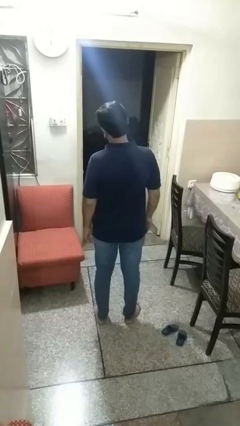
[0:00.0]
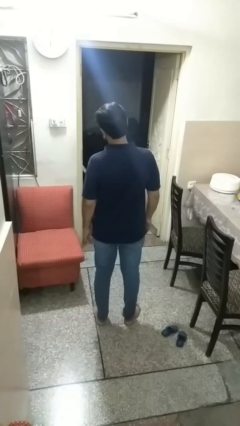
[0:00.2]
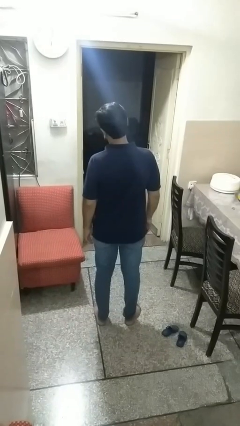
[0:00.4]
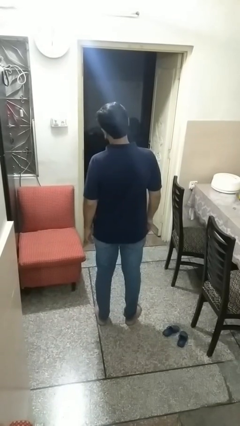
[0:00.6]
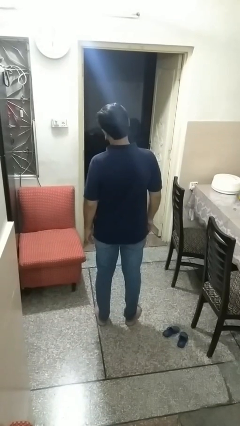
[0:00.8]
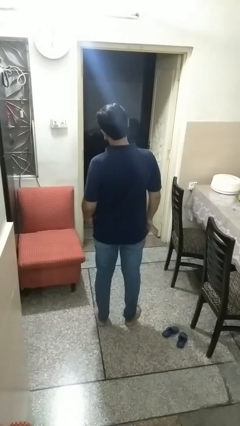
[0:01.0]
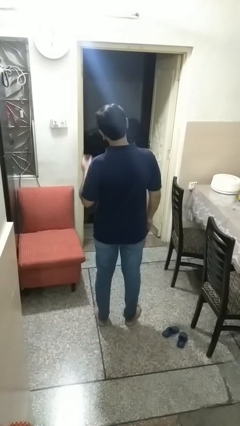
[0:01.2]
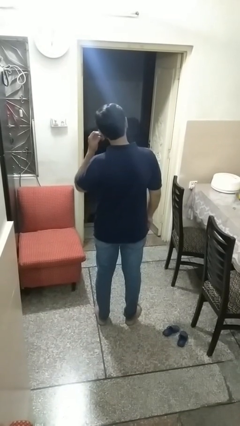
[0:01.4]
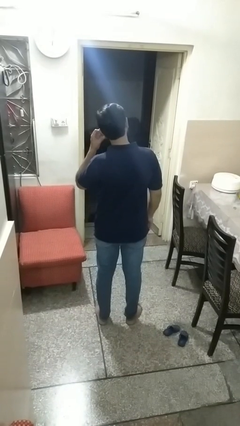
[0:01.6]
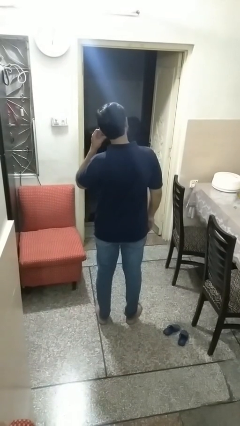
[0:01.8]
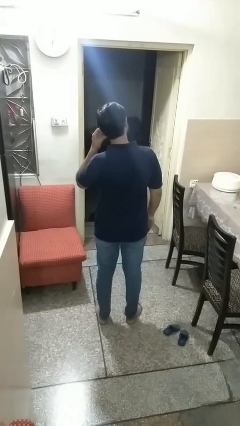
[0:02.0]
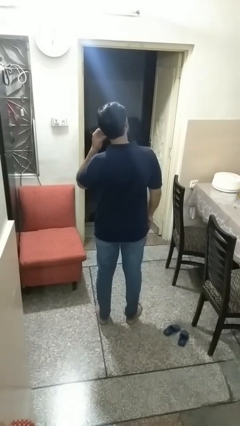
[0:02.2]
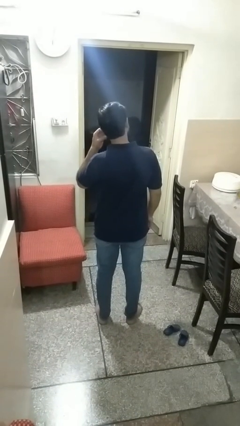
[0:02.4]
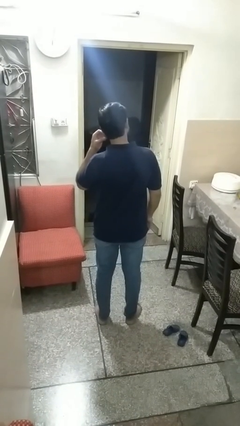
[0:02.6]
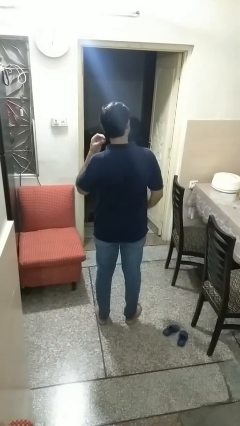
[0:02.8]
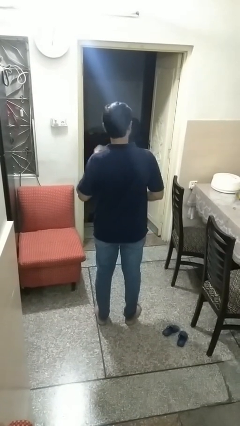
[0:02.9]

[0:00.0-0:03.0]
person takes off earrings

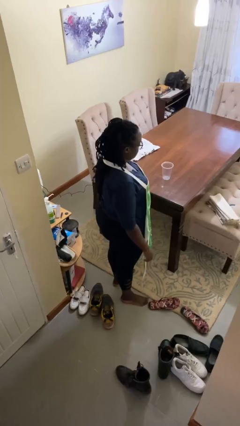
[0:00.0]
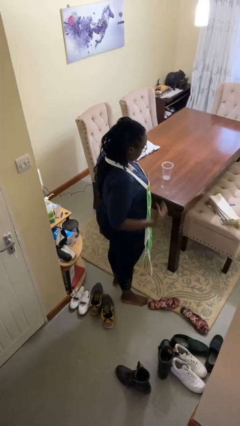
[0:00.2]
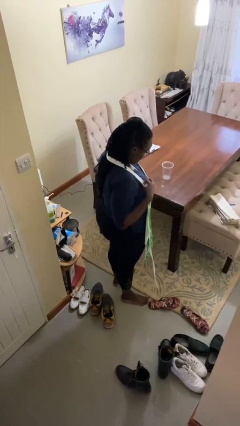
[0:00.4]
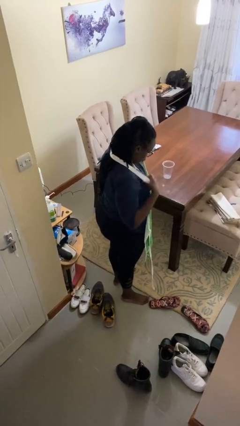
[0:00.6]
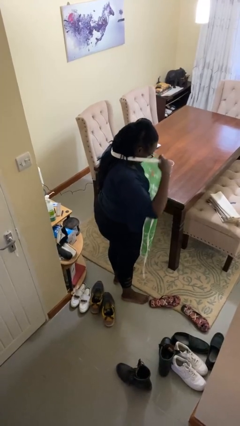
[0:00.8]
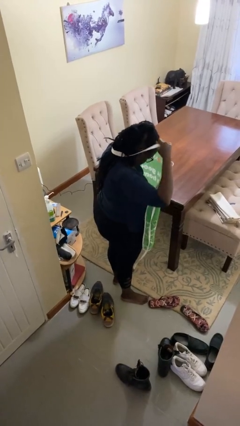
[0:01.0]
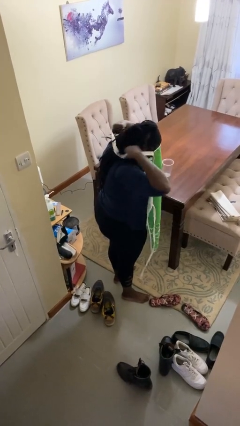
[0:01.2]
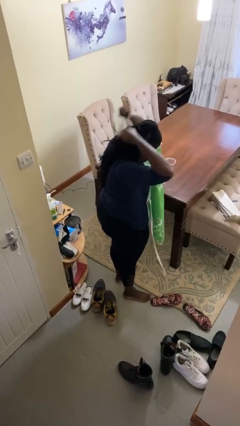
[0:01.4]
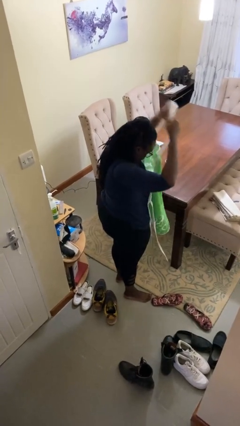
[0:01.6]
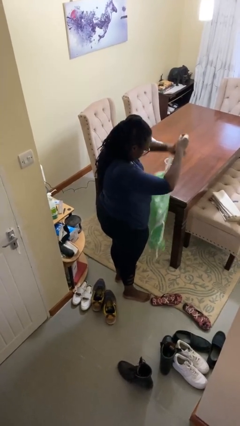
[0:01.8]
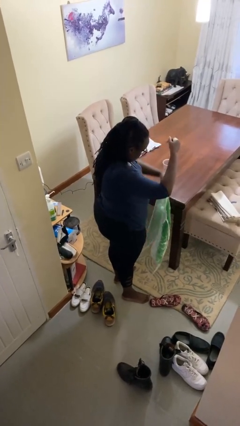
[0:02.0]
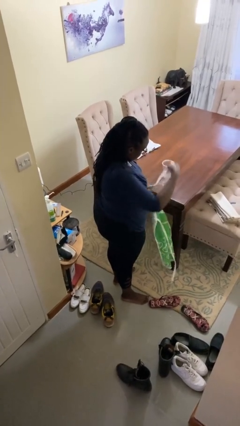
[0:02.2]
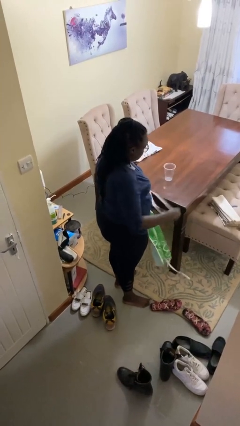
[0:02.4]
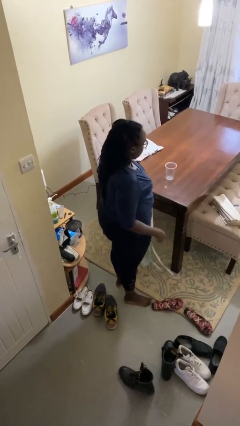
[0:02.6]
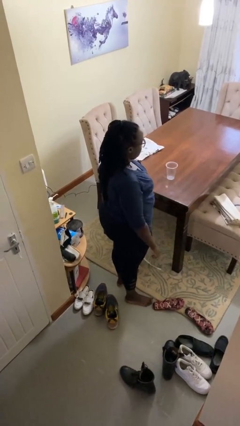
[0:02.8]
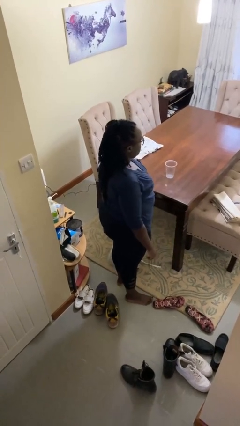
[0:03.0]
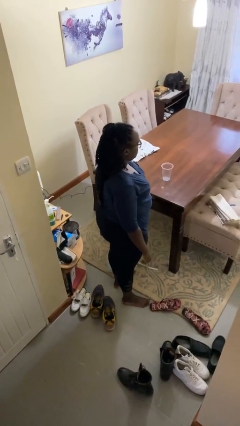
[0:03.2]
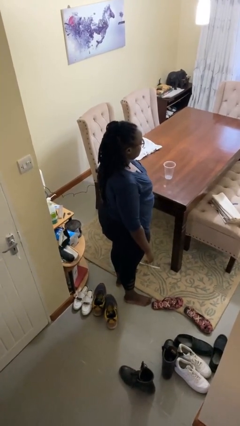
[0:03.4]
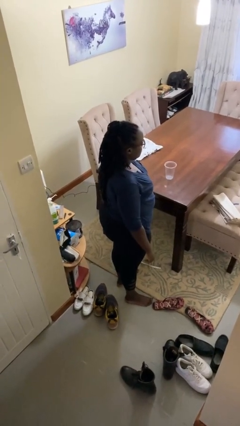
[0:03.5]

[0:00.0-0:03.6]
person takes off apron

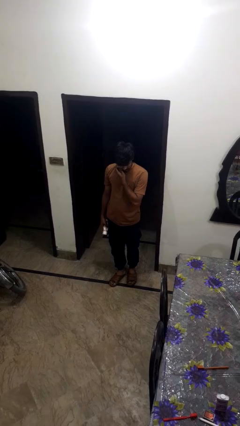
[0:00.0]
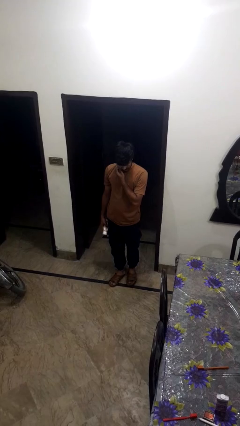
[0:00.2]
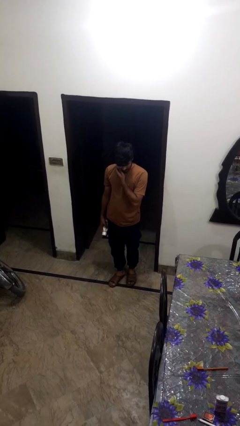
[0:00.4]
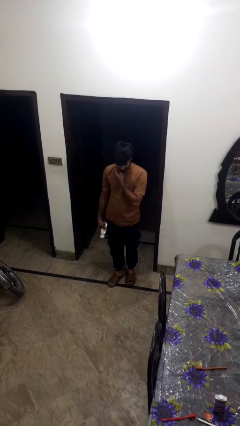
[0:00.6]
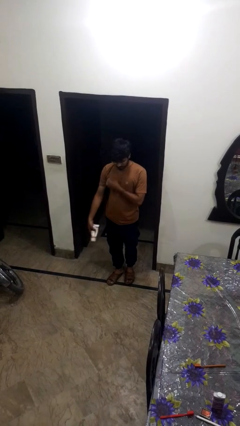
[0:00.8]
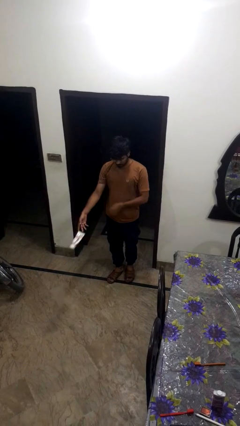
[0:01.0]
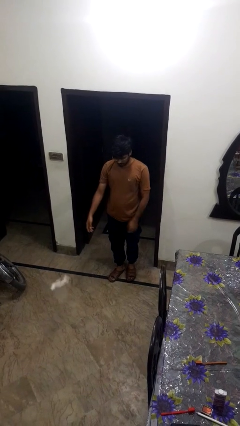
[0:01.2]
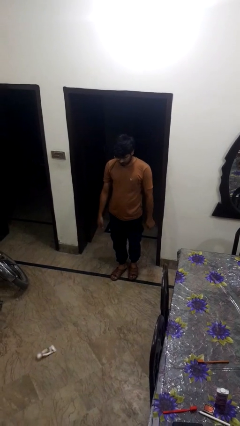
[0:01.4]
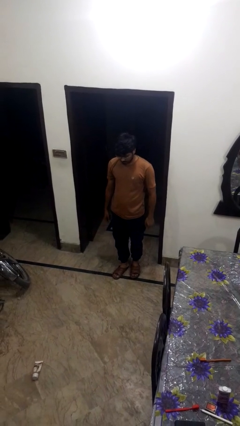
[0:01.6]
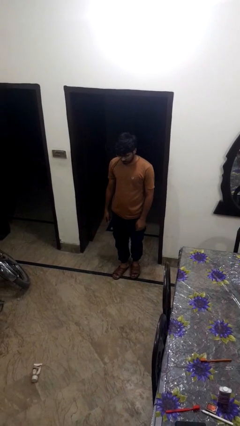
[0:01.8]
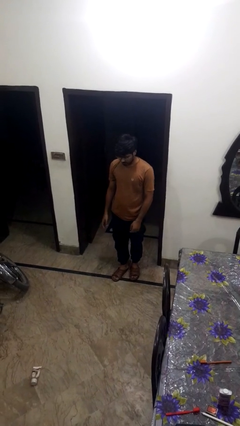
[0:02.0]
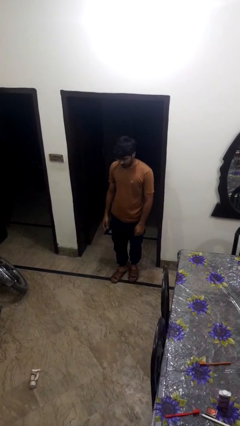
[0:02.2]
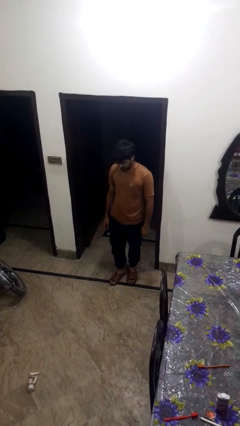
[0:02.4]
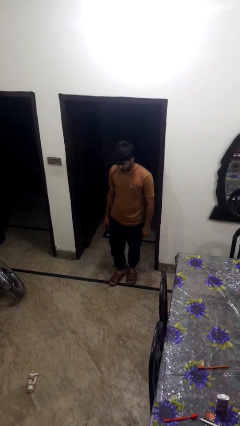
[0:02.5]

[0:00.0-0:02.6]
person throws object to ground

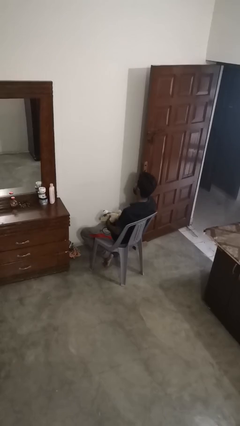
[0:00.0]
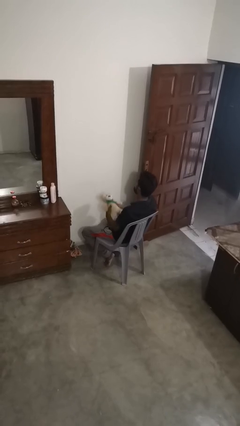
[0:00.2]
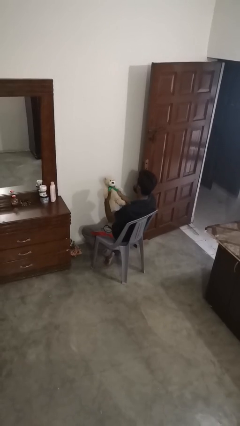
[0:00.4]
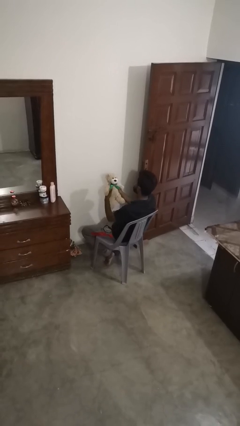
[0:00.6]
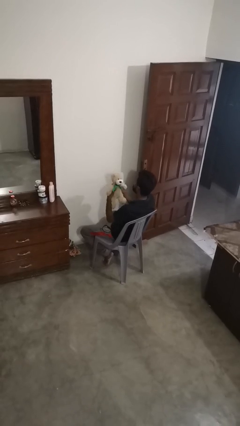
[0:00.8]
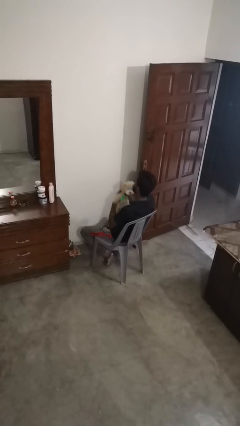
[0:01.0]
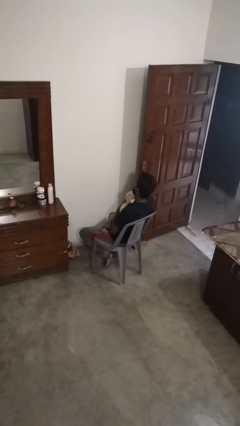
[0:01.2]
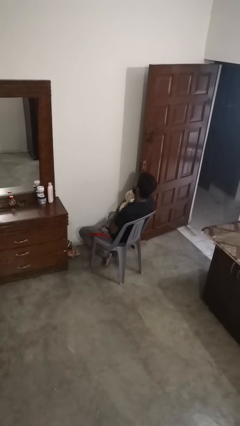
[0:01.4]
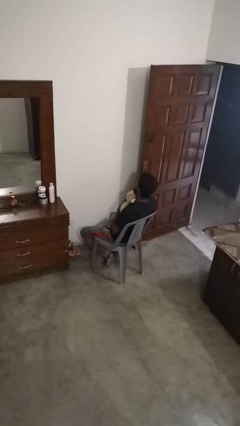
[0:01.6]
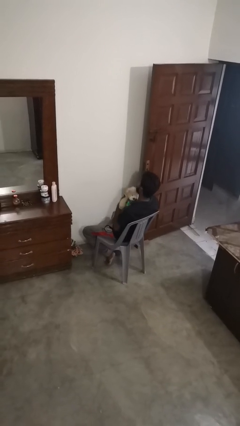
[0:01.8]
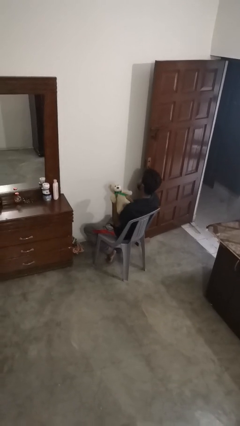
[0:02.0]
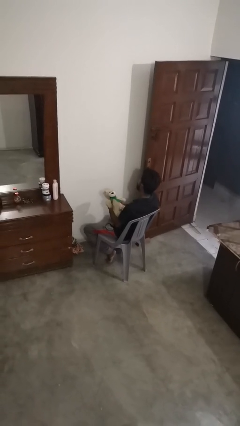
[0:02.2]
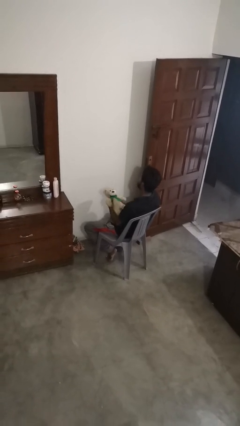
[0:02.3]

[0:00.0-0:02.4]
person hugs stuffed animal

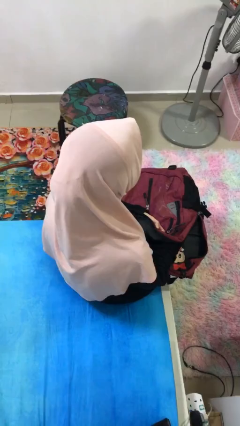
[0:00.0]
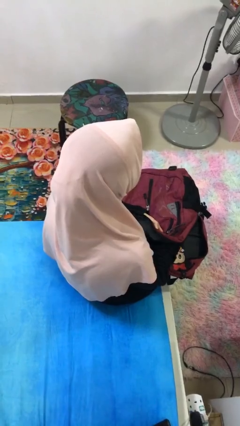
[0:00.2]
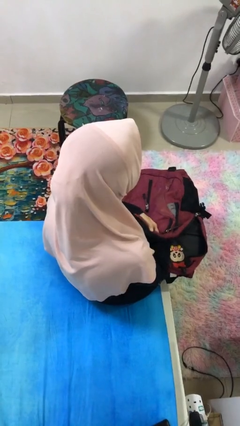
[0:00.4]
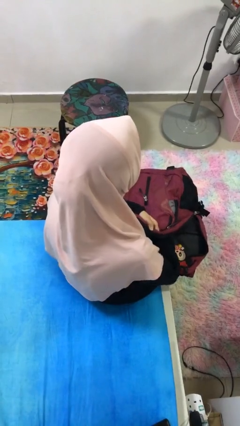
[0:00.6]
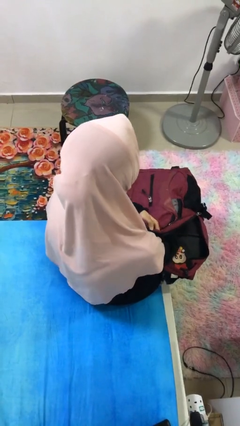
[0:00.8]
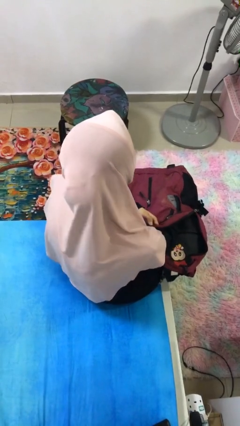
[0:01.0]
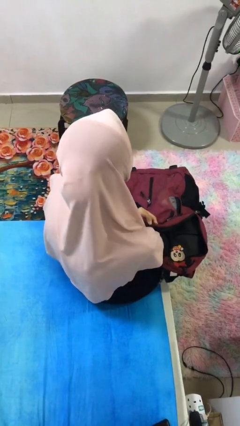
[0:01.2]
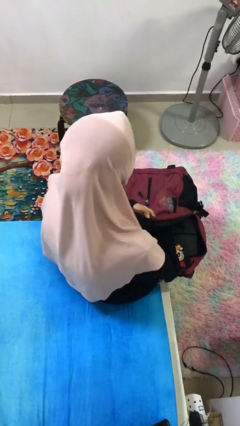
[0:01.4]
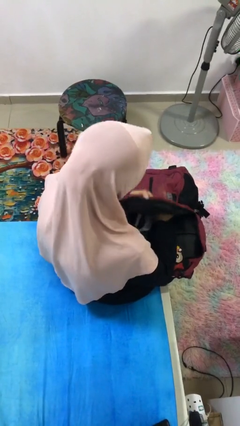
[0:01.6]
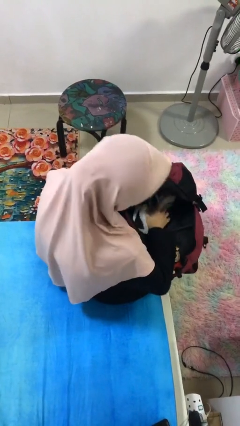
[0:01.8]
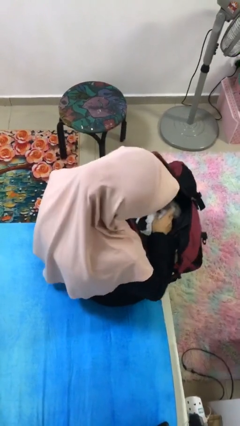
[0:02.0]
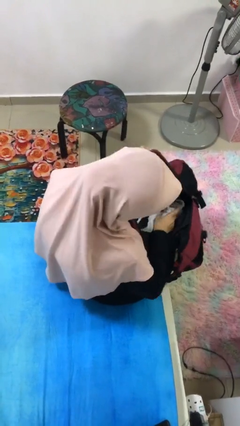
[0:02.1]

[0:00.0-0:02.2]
person searches in backpack

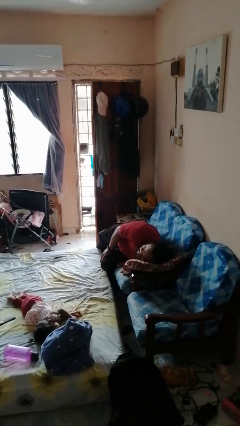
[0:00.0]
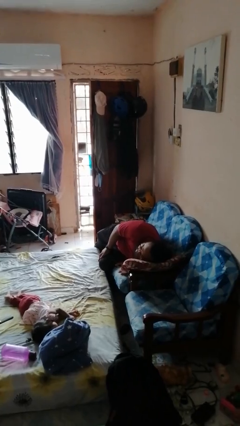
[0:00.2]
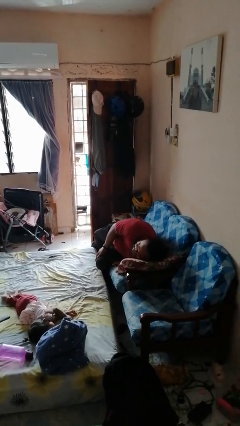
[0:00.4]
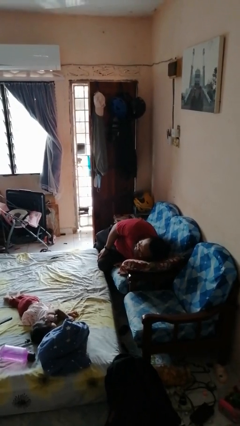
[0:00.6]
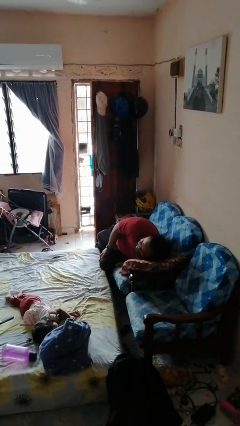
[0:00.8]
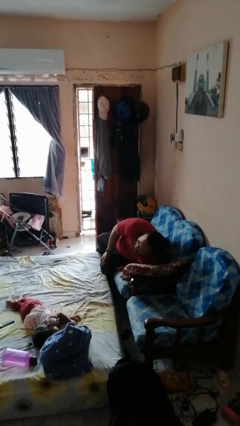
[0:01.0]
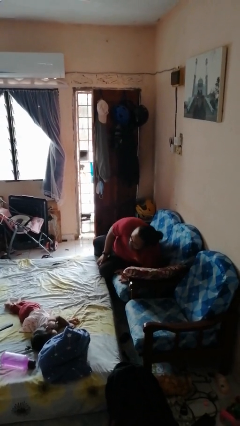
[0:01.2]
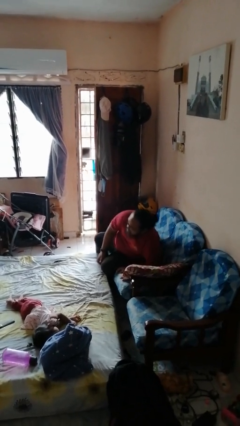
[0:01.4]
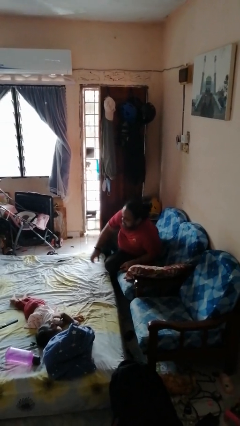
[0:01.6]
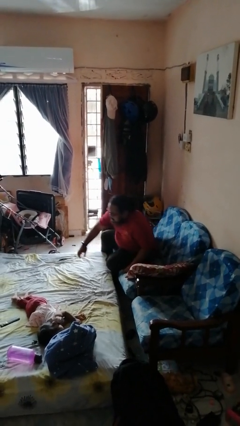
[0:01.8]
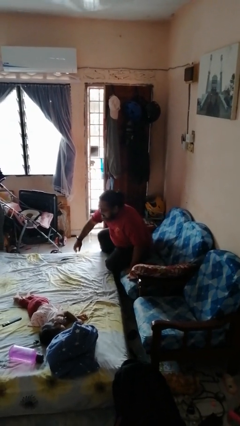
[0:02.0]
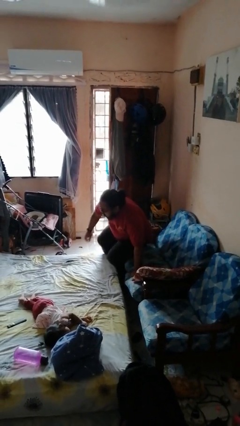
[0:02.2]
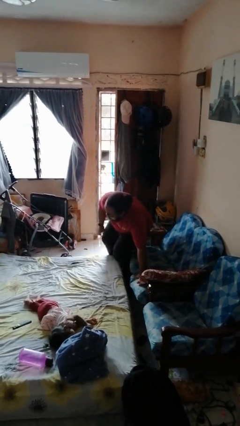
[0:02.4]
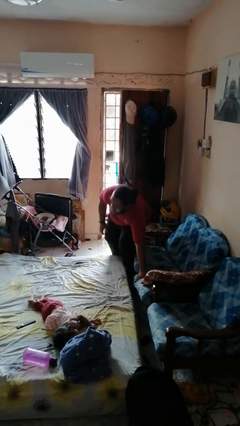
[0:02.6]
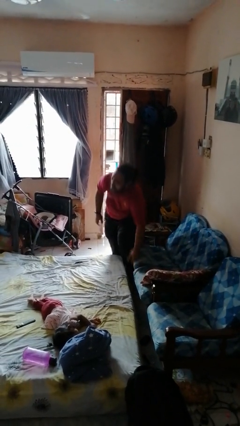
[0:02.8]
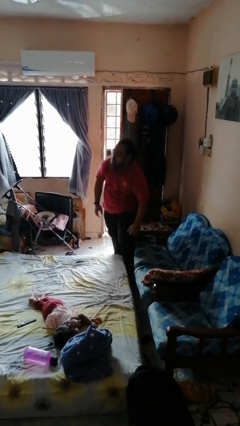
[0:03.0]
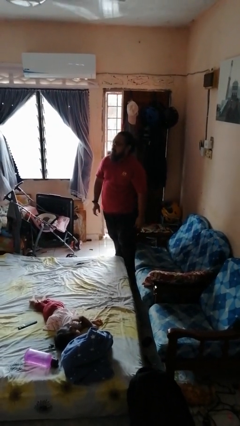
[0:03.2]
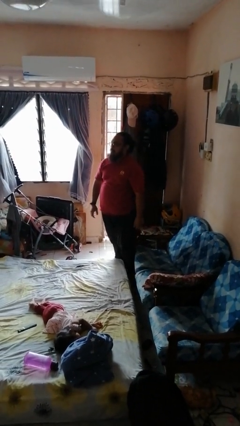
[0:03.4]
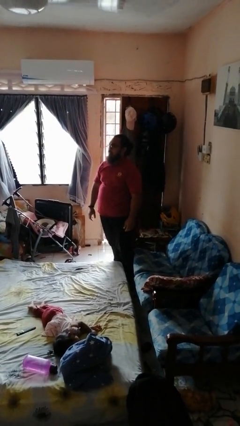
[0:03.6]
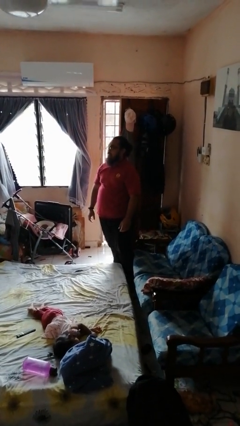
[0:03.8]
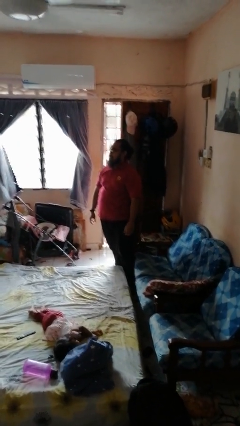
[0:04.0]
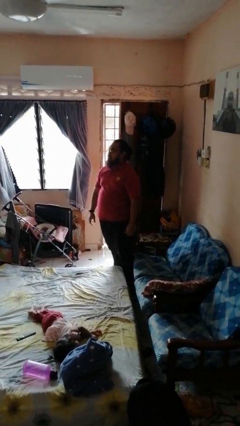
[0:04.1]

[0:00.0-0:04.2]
person stands up
